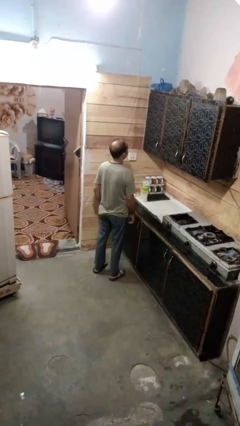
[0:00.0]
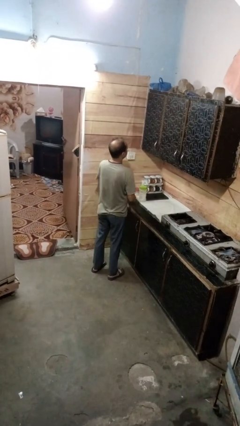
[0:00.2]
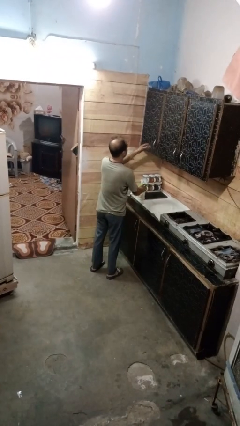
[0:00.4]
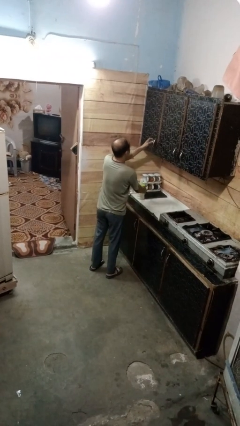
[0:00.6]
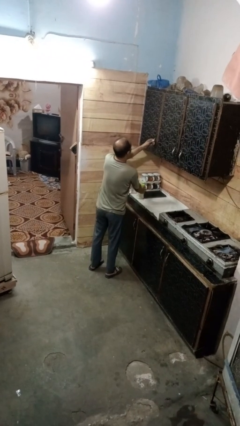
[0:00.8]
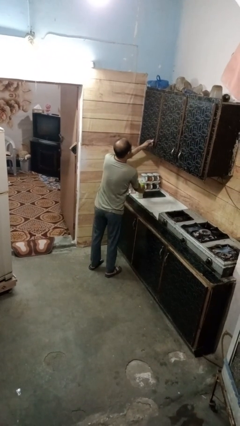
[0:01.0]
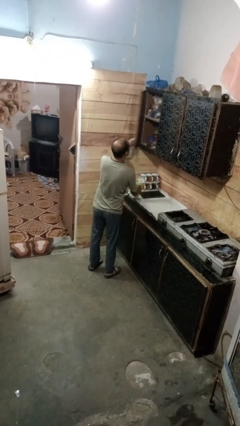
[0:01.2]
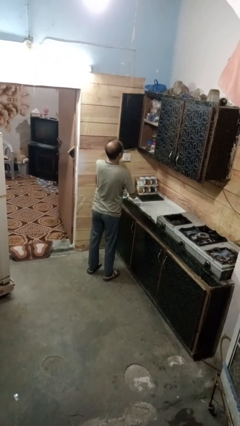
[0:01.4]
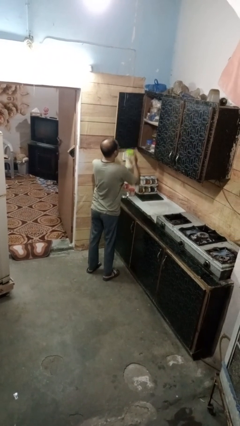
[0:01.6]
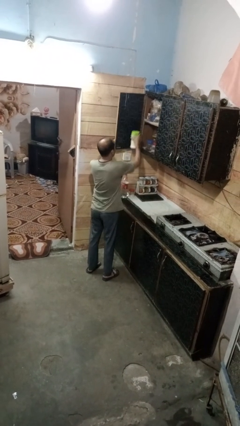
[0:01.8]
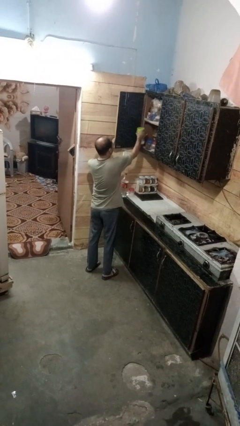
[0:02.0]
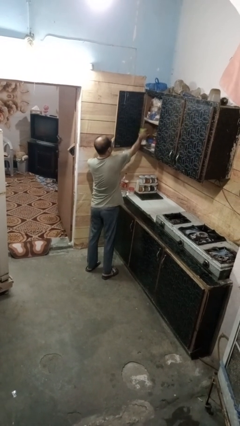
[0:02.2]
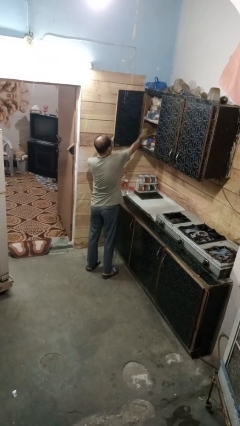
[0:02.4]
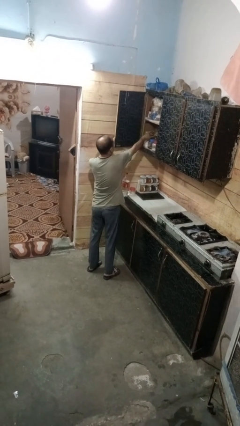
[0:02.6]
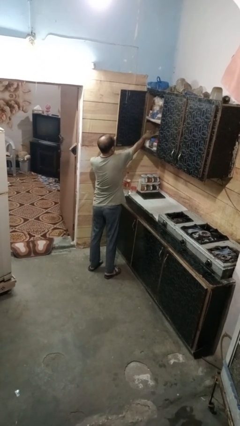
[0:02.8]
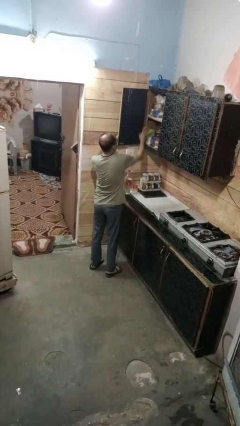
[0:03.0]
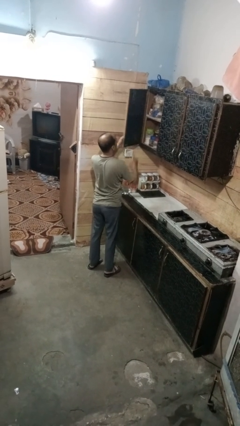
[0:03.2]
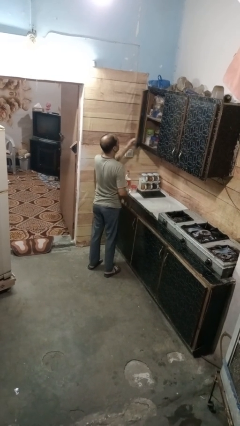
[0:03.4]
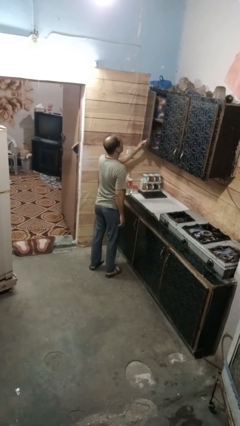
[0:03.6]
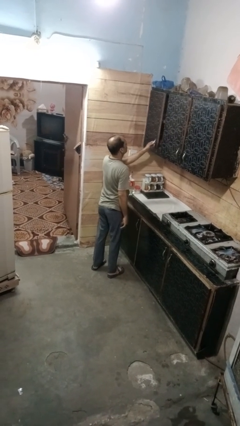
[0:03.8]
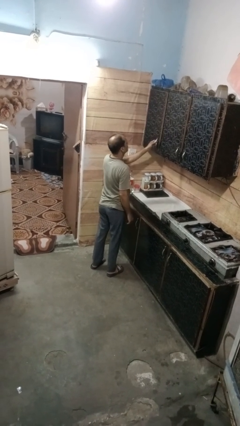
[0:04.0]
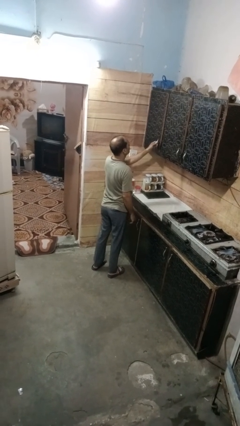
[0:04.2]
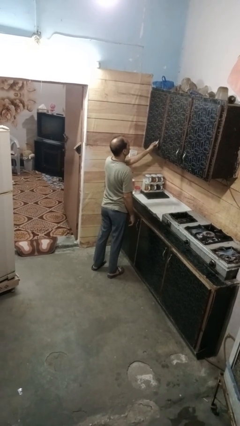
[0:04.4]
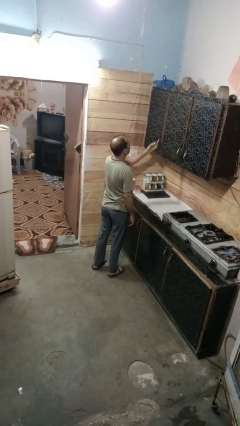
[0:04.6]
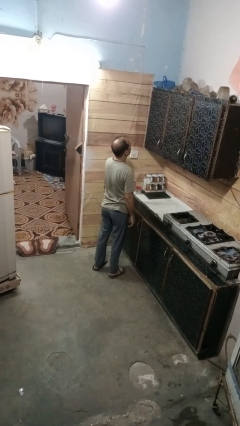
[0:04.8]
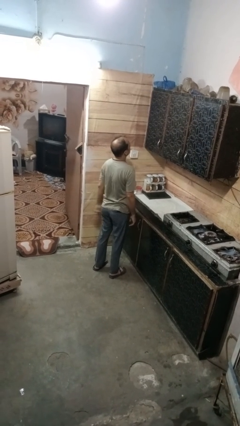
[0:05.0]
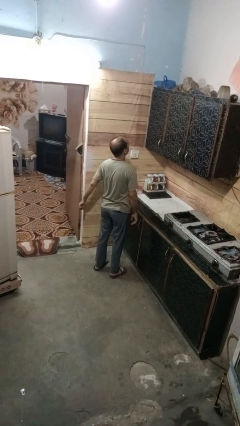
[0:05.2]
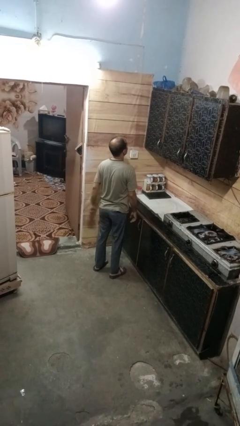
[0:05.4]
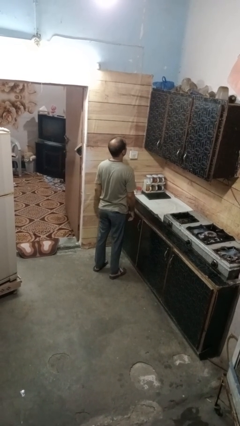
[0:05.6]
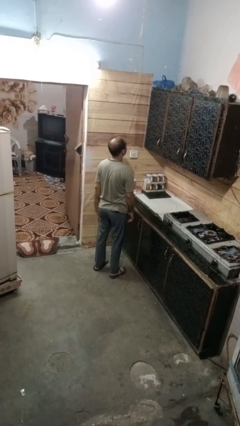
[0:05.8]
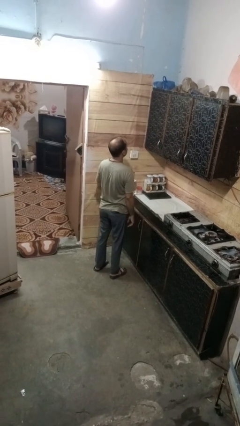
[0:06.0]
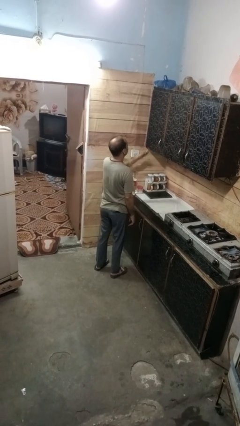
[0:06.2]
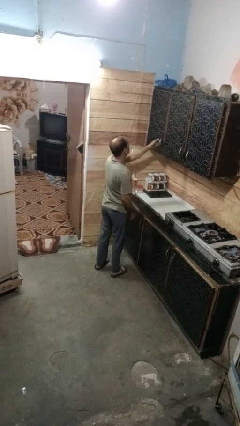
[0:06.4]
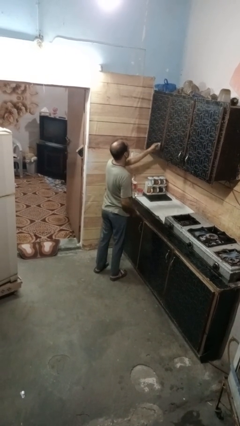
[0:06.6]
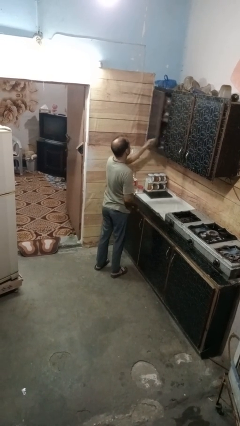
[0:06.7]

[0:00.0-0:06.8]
person puts object in cabinet

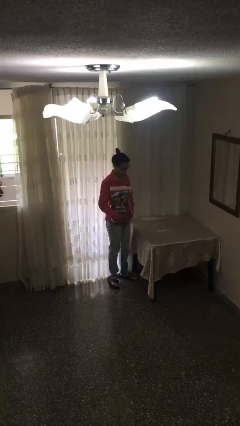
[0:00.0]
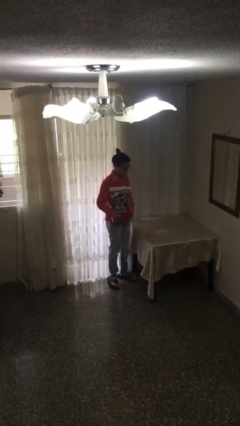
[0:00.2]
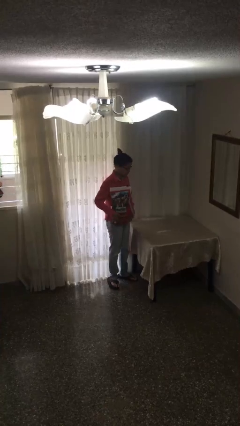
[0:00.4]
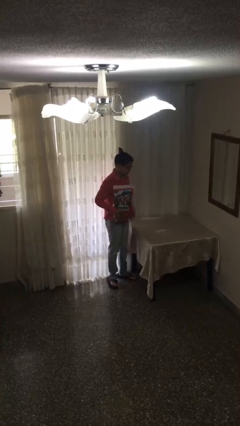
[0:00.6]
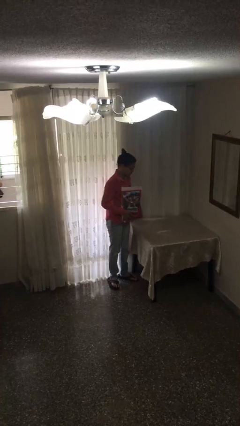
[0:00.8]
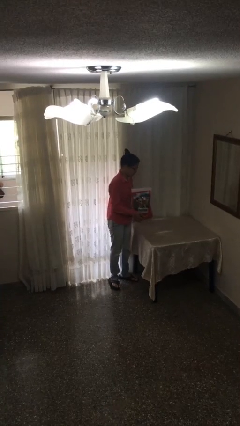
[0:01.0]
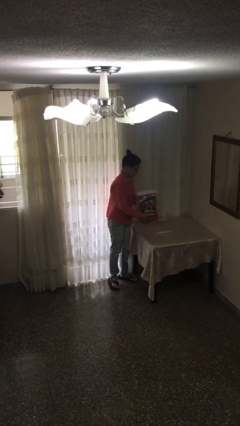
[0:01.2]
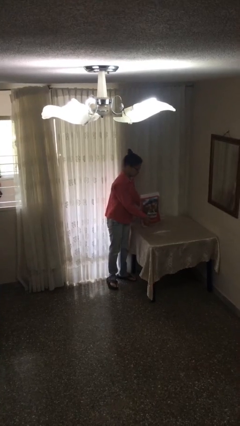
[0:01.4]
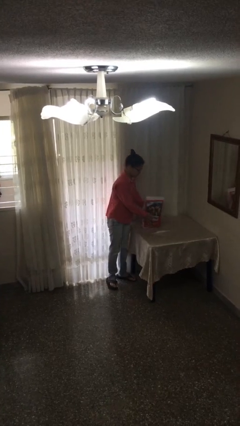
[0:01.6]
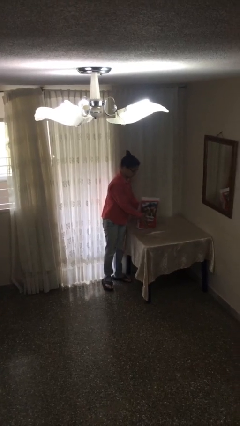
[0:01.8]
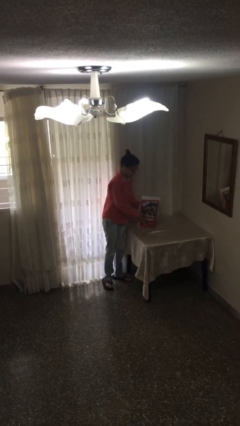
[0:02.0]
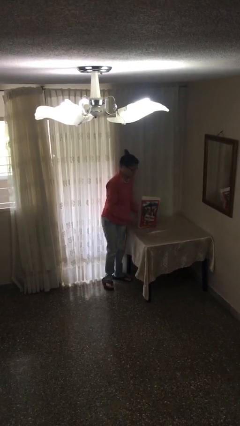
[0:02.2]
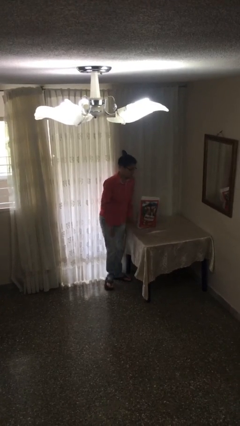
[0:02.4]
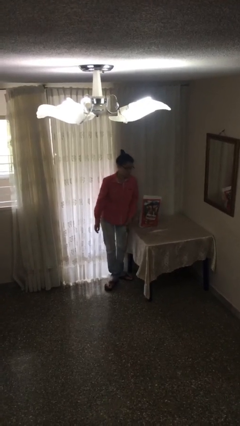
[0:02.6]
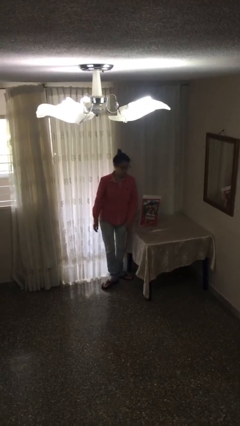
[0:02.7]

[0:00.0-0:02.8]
person puts down object on table

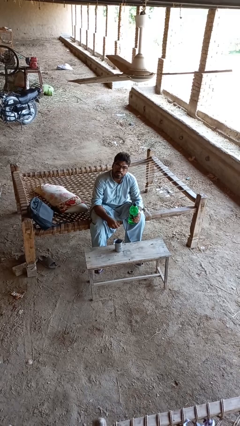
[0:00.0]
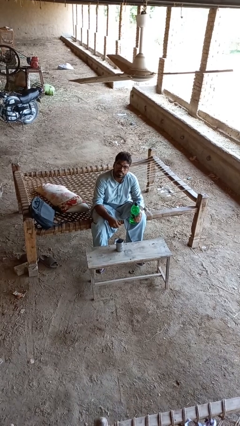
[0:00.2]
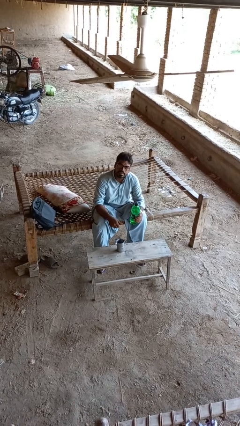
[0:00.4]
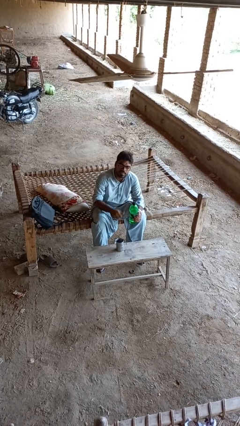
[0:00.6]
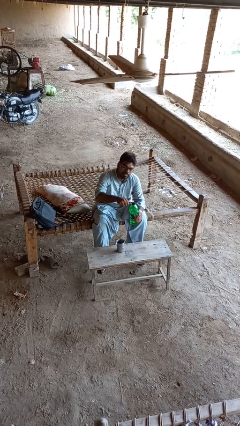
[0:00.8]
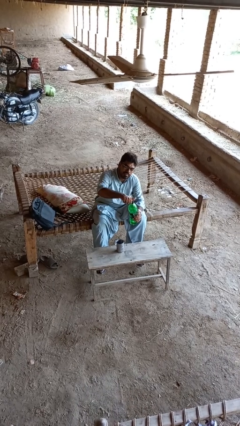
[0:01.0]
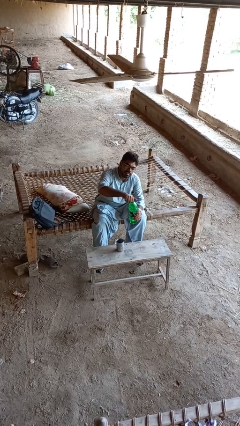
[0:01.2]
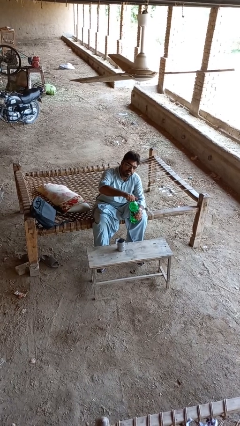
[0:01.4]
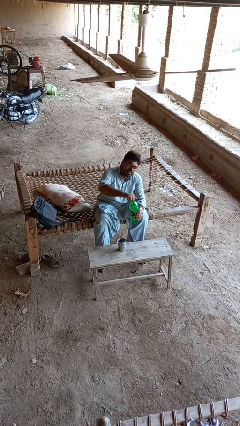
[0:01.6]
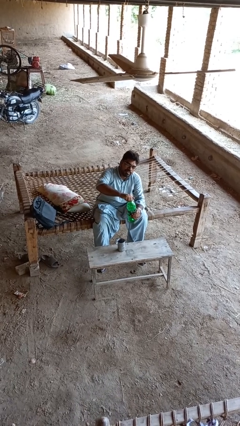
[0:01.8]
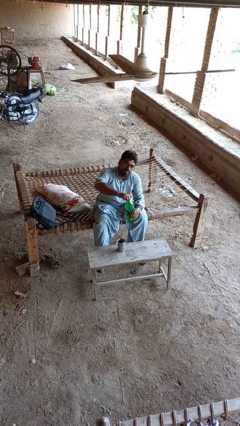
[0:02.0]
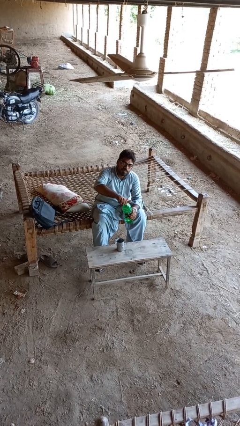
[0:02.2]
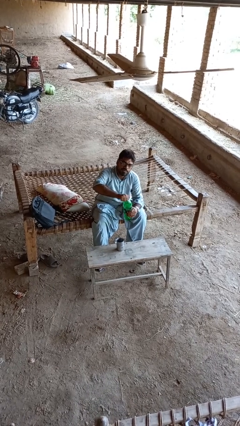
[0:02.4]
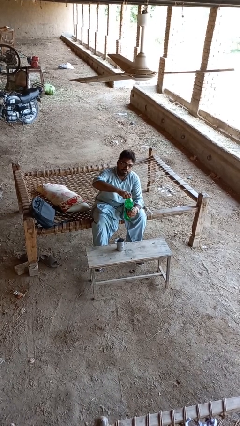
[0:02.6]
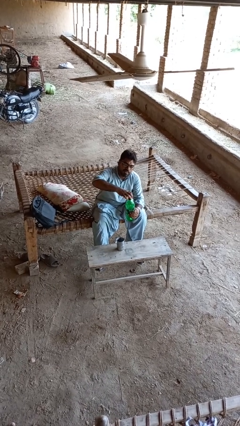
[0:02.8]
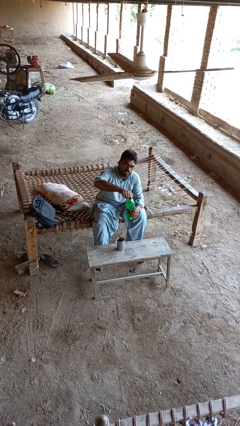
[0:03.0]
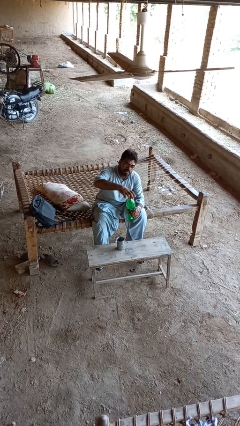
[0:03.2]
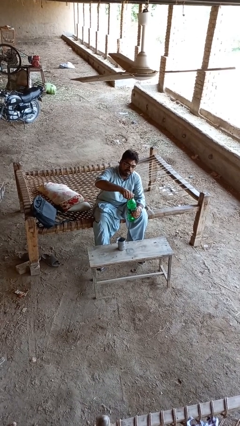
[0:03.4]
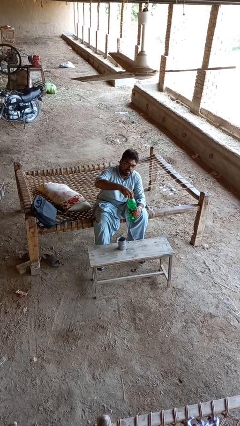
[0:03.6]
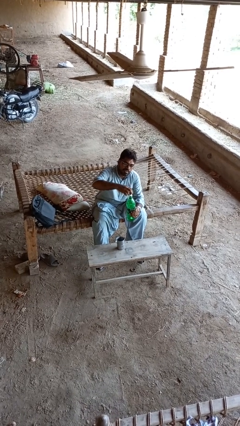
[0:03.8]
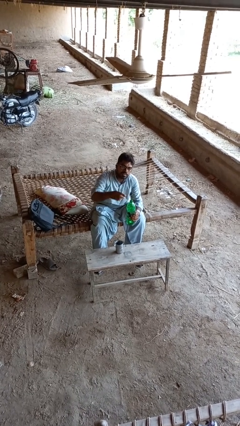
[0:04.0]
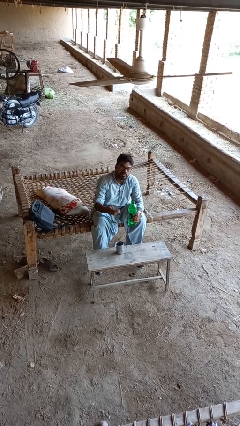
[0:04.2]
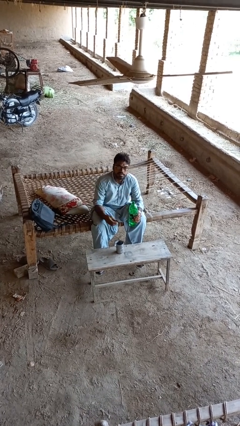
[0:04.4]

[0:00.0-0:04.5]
person unscrews lid from bottle

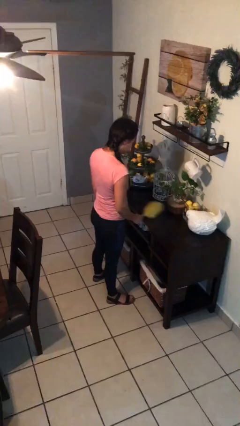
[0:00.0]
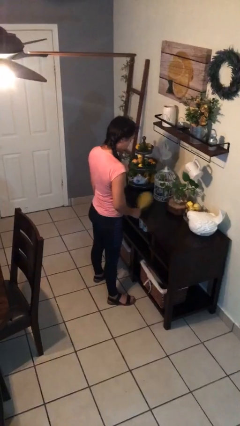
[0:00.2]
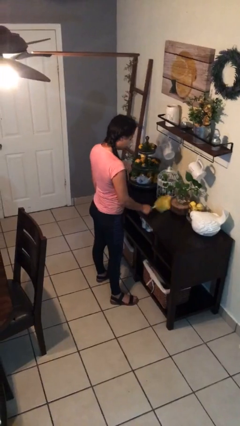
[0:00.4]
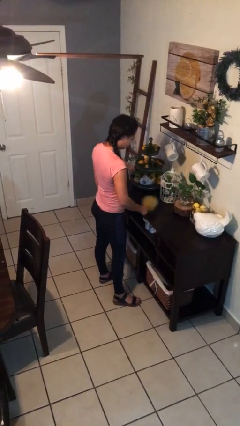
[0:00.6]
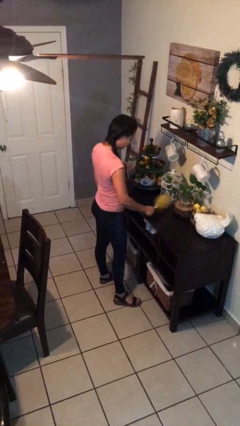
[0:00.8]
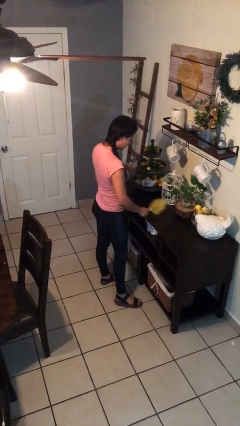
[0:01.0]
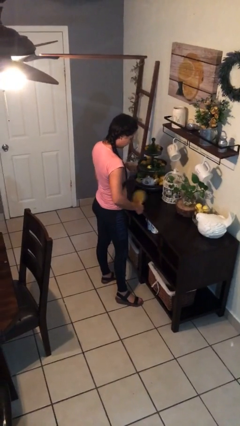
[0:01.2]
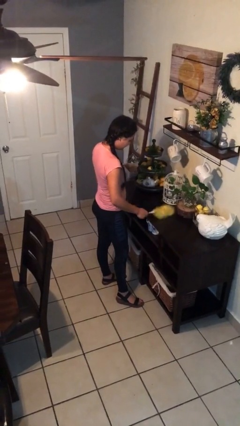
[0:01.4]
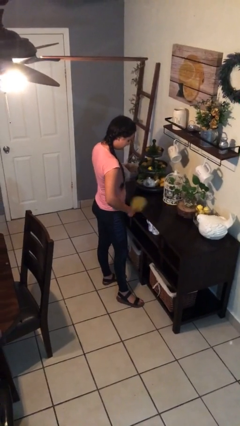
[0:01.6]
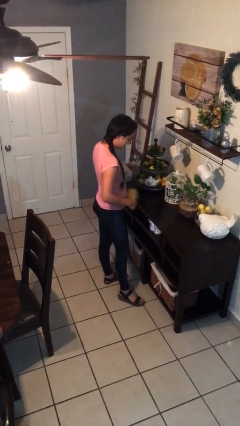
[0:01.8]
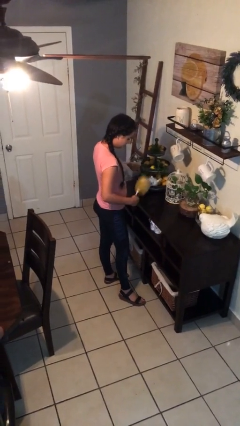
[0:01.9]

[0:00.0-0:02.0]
person dusts furniture

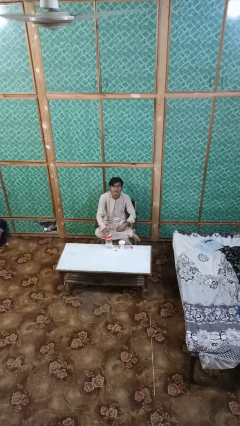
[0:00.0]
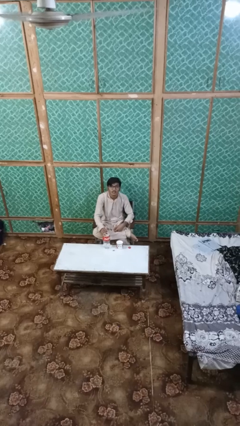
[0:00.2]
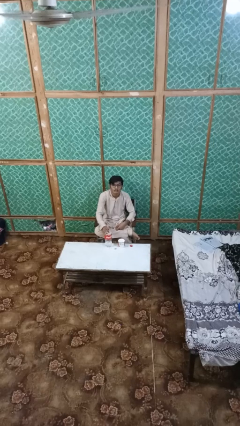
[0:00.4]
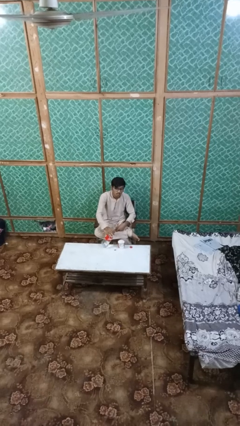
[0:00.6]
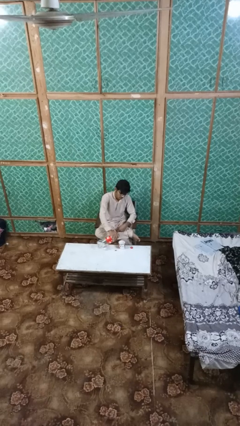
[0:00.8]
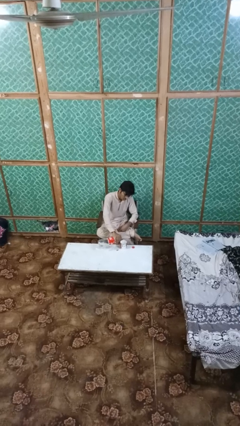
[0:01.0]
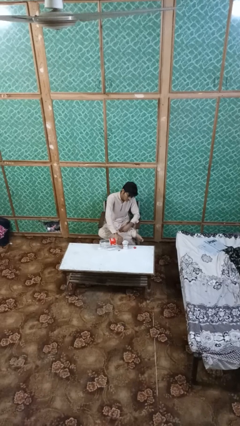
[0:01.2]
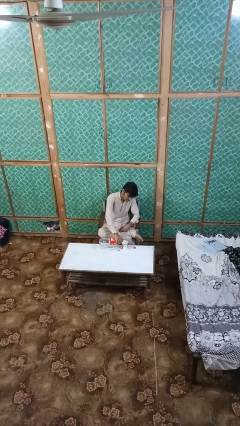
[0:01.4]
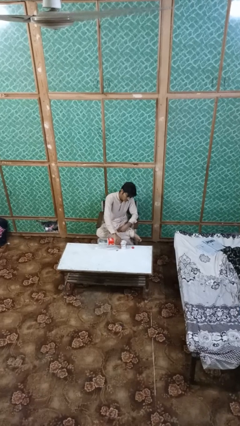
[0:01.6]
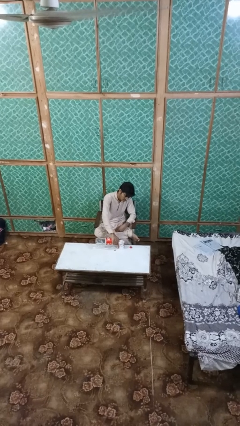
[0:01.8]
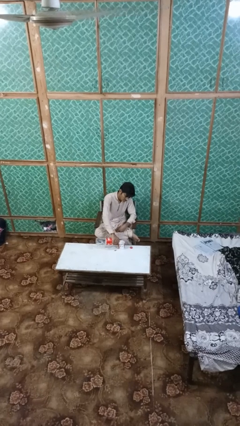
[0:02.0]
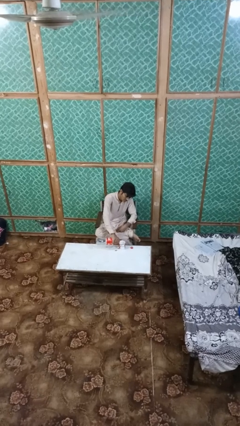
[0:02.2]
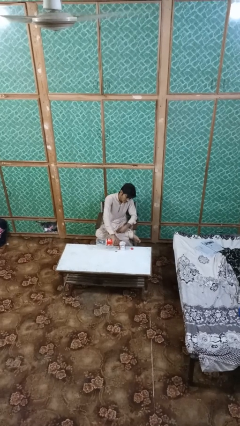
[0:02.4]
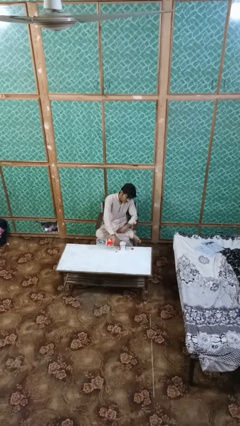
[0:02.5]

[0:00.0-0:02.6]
person pours liquid into cup
